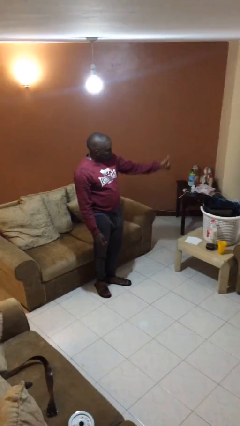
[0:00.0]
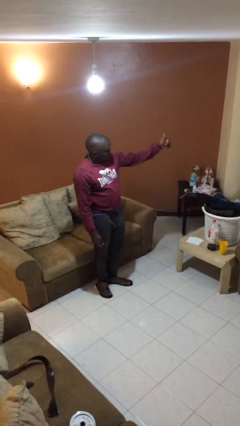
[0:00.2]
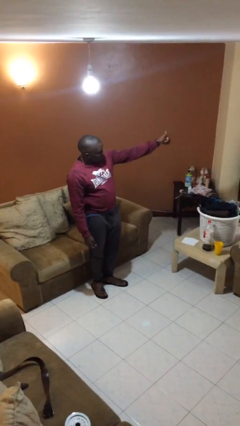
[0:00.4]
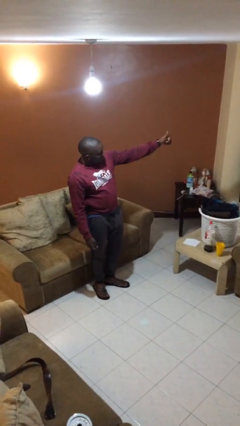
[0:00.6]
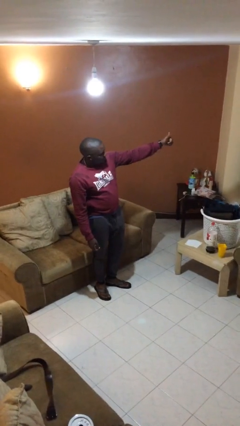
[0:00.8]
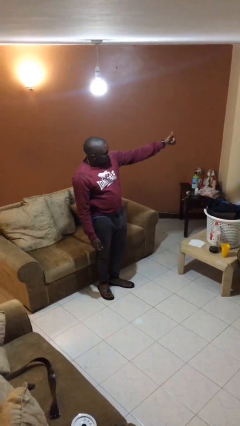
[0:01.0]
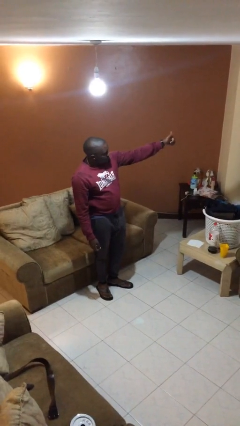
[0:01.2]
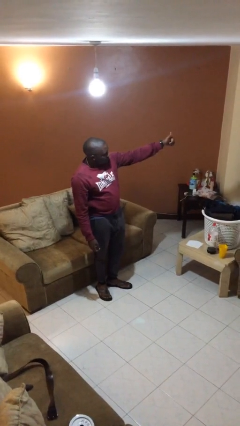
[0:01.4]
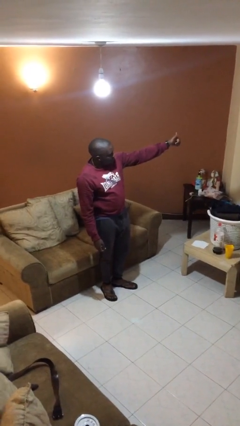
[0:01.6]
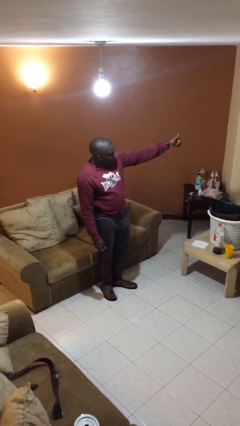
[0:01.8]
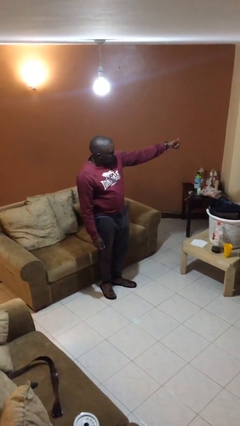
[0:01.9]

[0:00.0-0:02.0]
person gestures thumbs up

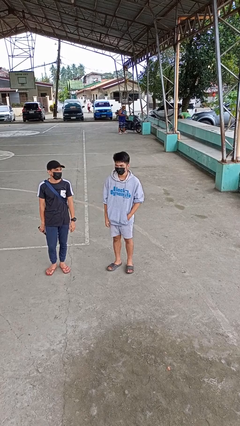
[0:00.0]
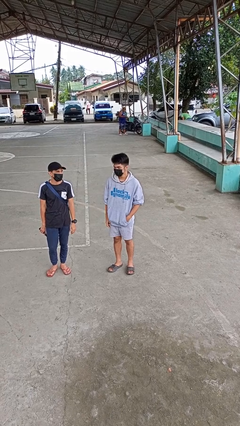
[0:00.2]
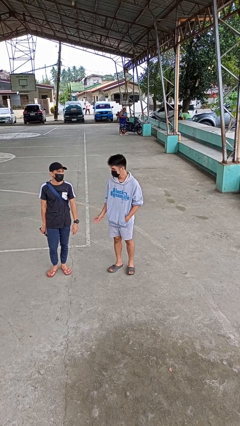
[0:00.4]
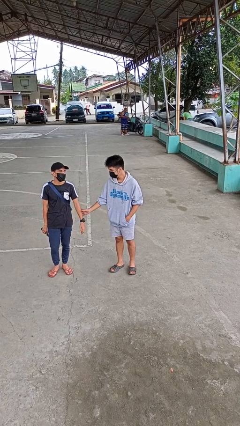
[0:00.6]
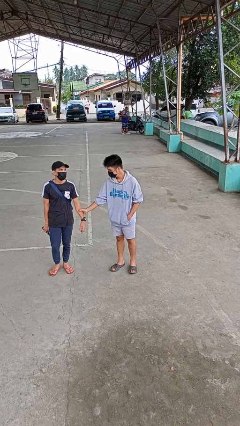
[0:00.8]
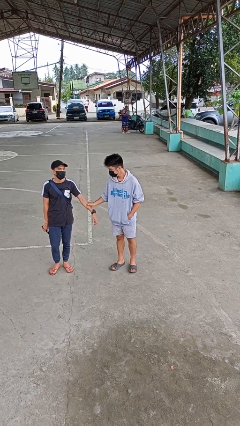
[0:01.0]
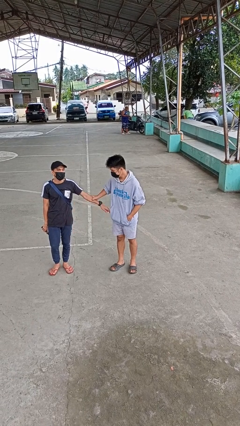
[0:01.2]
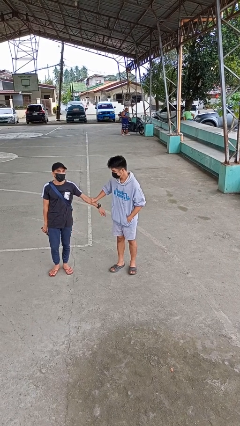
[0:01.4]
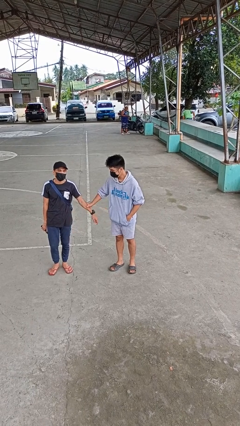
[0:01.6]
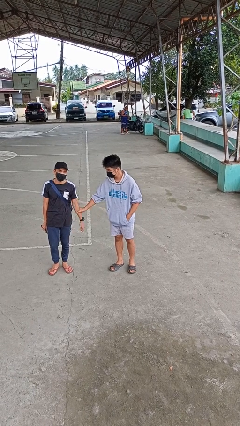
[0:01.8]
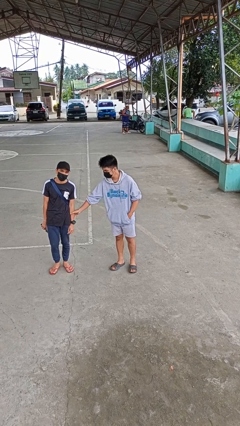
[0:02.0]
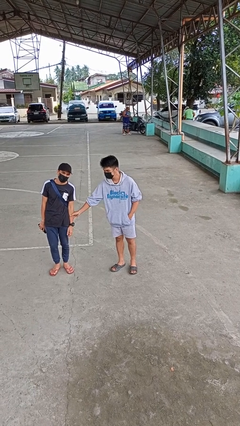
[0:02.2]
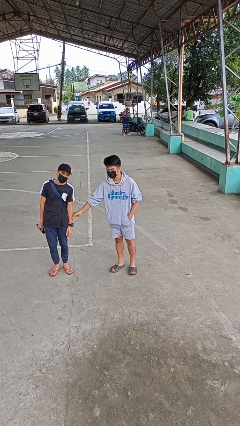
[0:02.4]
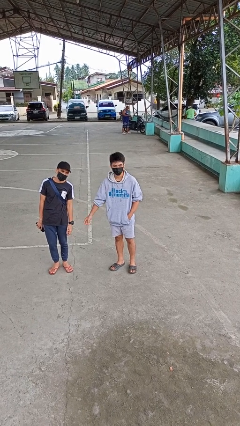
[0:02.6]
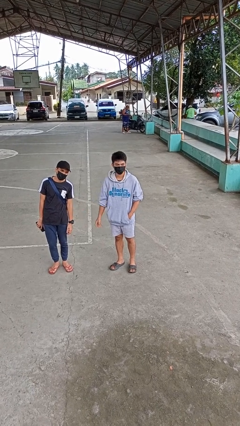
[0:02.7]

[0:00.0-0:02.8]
person grabs person by forearm

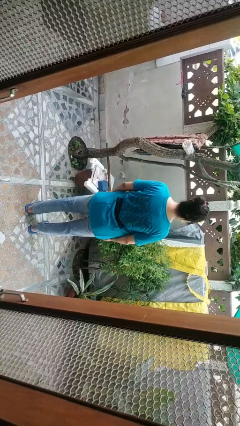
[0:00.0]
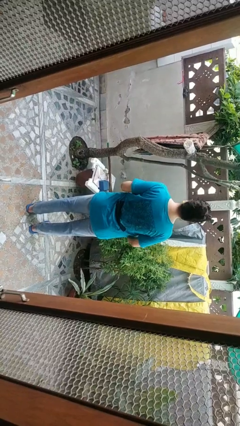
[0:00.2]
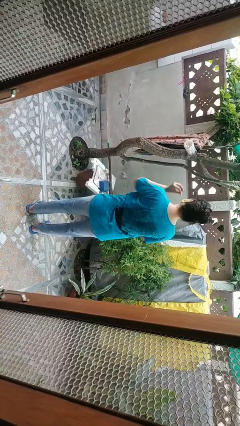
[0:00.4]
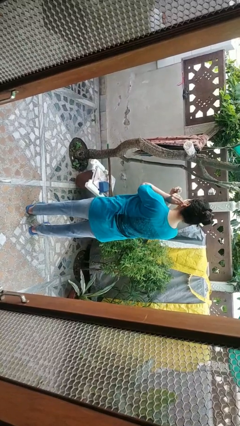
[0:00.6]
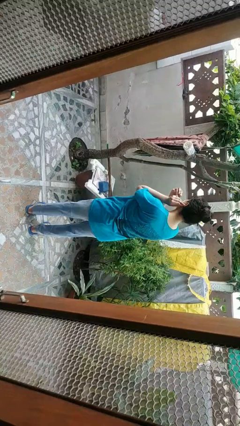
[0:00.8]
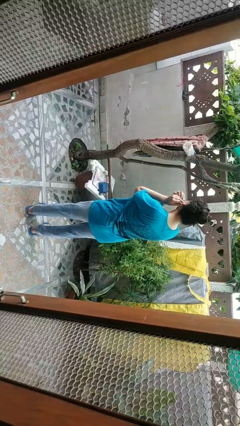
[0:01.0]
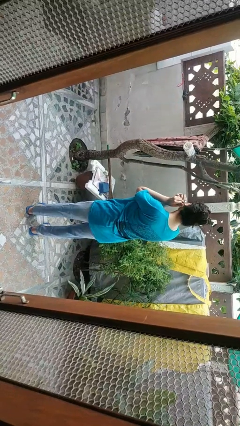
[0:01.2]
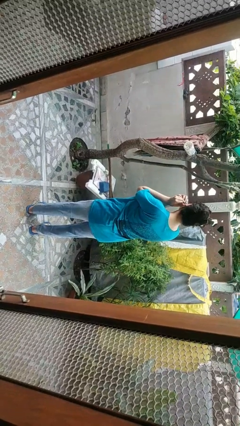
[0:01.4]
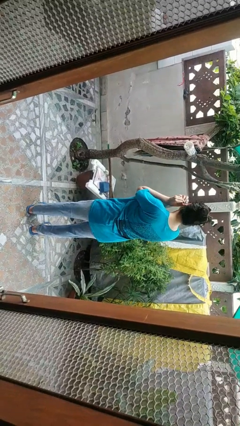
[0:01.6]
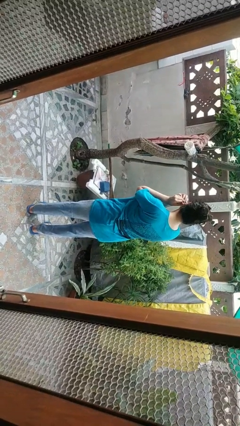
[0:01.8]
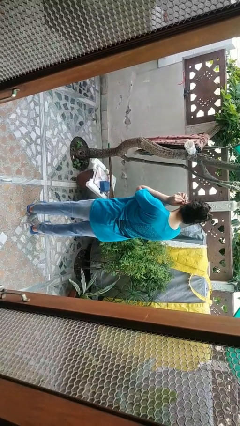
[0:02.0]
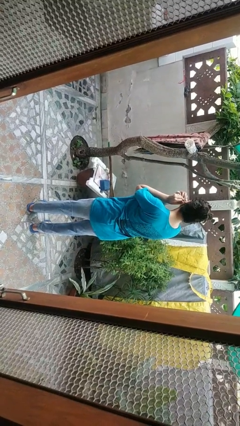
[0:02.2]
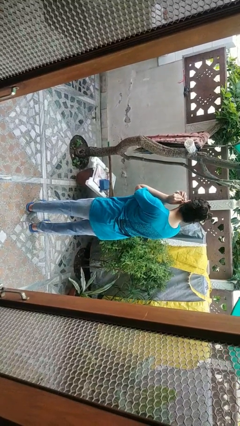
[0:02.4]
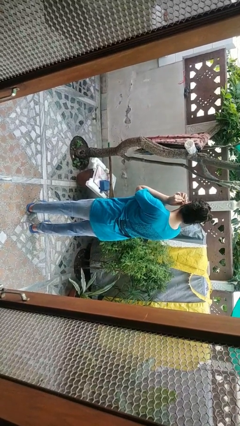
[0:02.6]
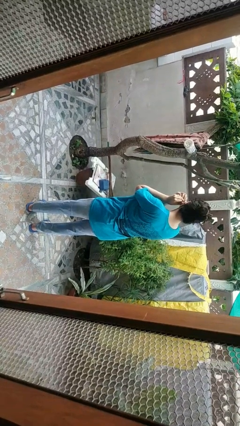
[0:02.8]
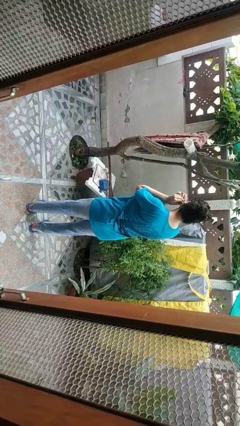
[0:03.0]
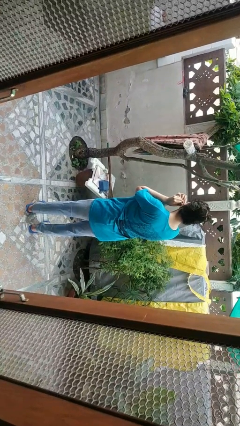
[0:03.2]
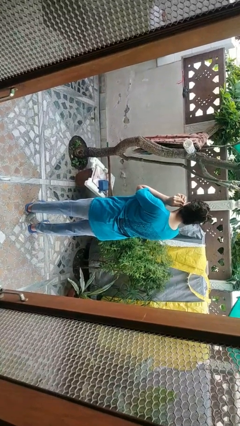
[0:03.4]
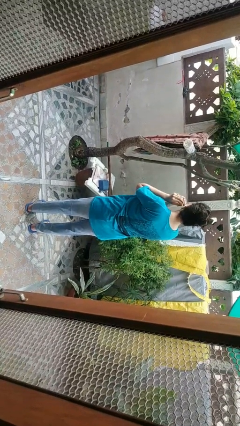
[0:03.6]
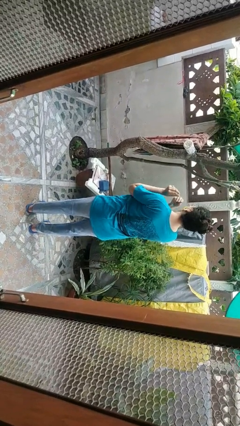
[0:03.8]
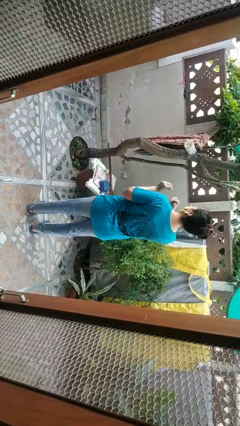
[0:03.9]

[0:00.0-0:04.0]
person puts on earrings

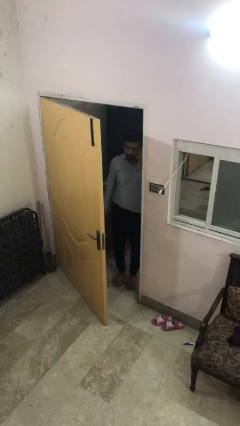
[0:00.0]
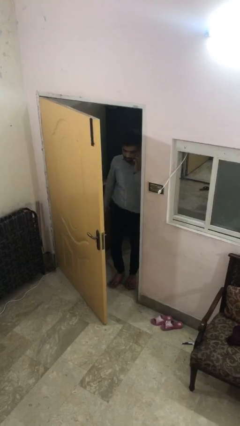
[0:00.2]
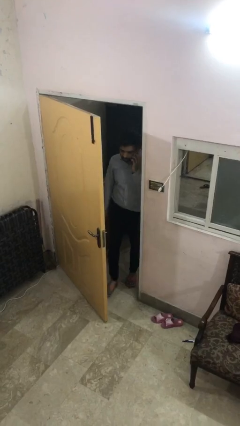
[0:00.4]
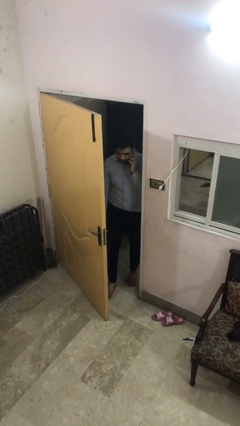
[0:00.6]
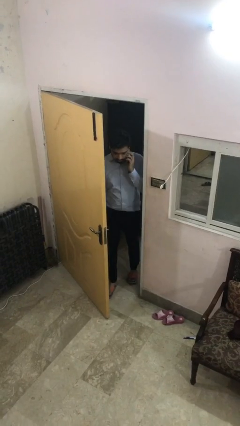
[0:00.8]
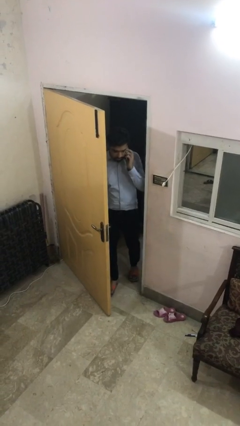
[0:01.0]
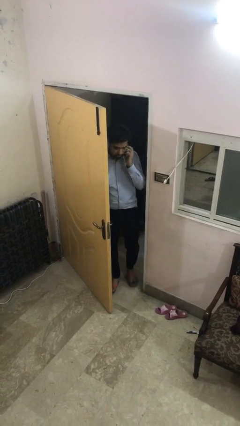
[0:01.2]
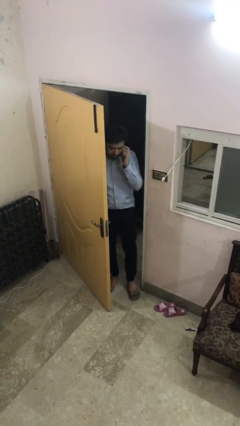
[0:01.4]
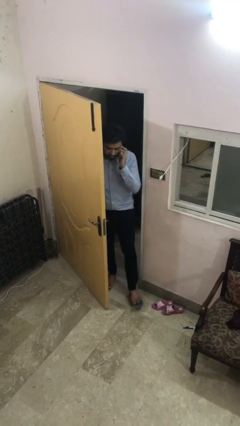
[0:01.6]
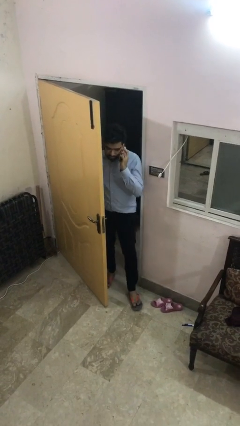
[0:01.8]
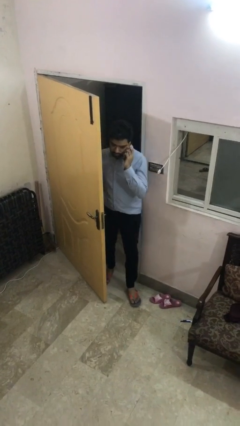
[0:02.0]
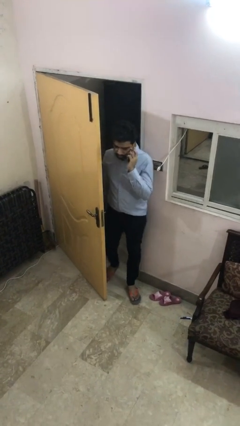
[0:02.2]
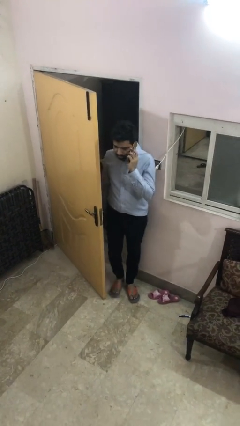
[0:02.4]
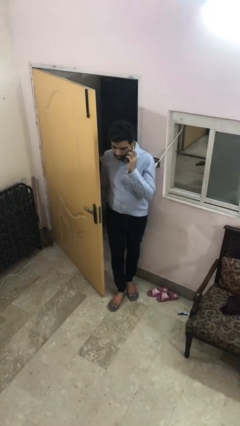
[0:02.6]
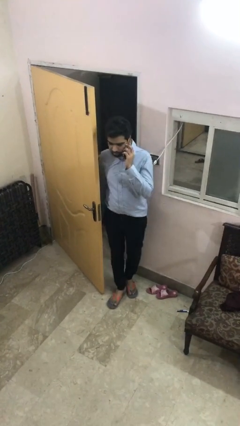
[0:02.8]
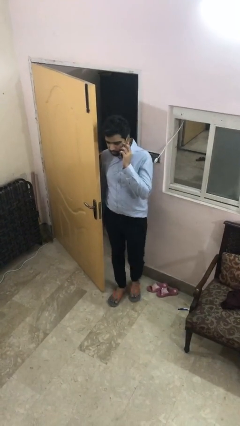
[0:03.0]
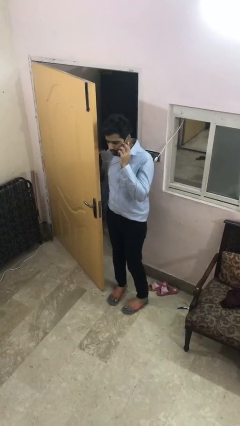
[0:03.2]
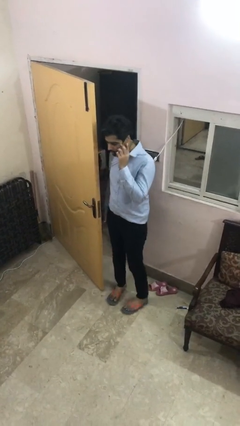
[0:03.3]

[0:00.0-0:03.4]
person enters scene through structure

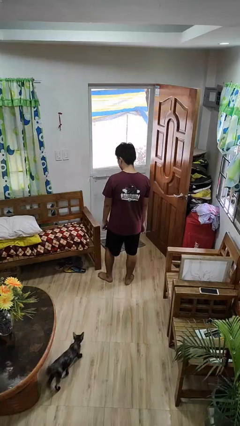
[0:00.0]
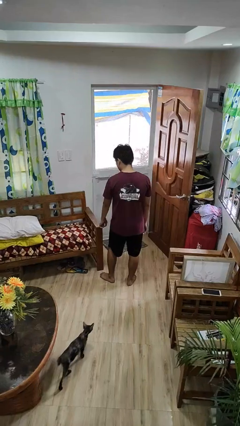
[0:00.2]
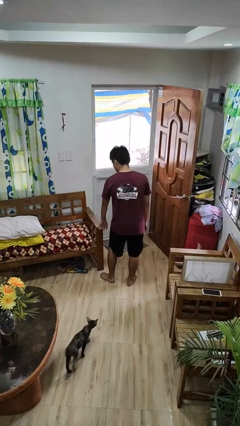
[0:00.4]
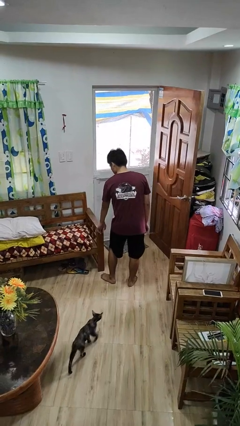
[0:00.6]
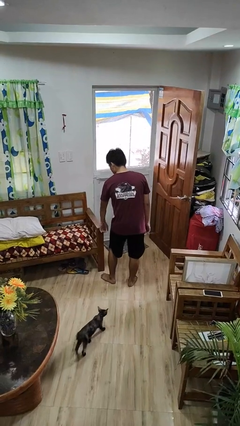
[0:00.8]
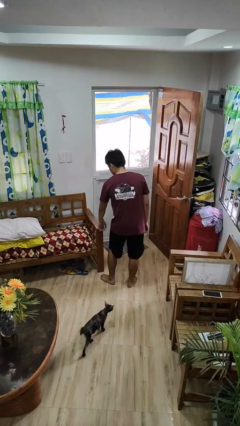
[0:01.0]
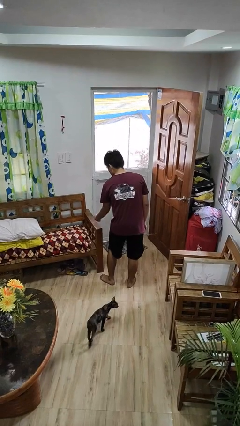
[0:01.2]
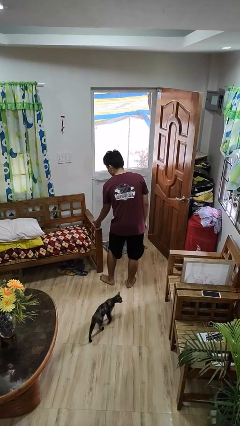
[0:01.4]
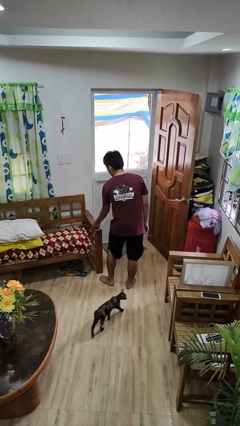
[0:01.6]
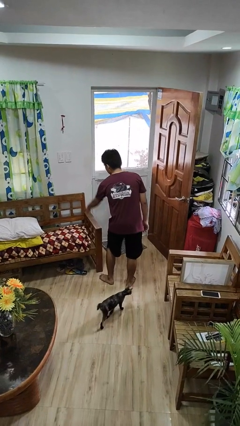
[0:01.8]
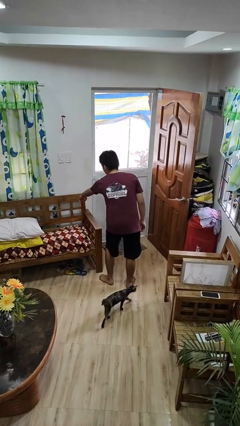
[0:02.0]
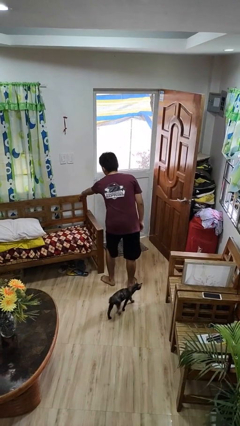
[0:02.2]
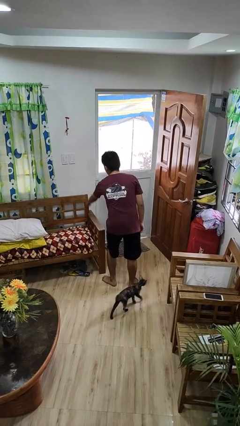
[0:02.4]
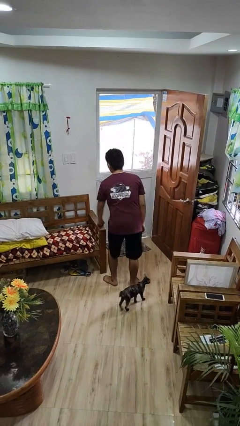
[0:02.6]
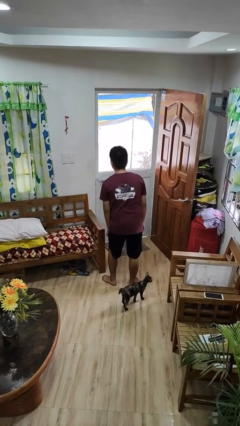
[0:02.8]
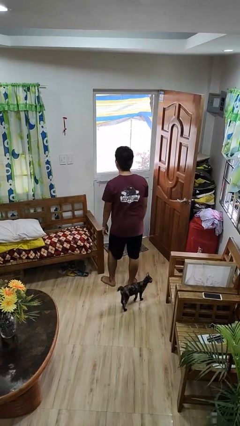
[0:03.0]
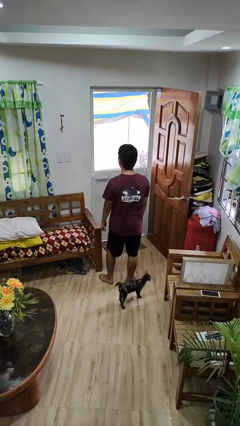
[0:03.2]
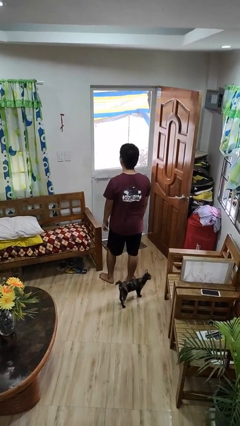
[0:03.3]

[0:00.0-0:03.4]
person taps object with finger

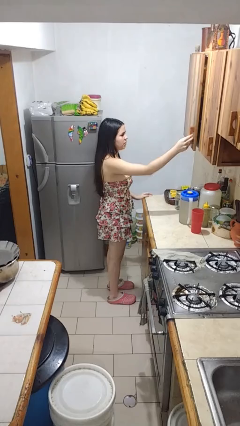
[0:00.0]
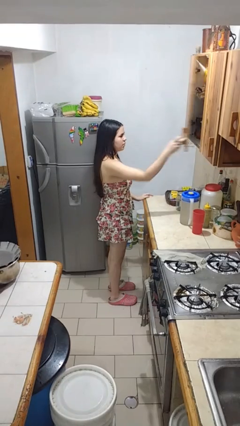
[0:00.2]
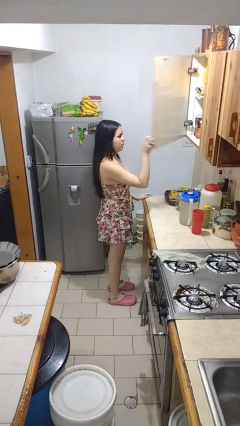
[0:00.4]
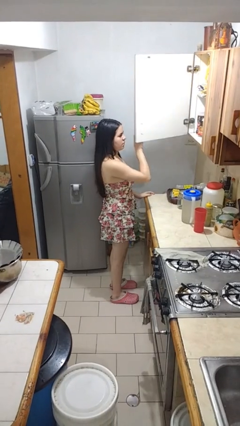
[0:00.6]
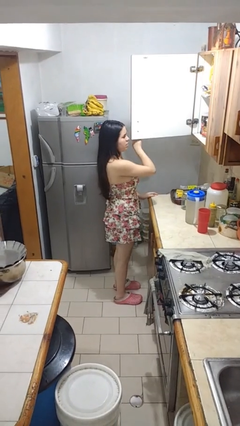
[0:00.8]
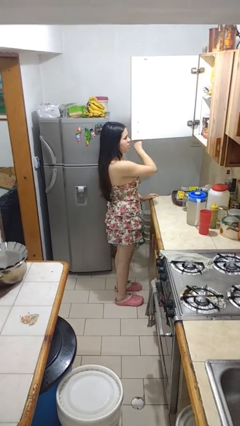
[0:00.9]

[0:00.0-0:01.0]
person opens cabinet

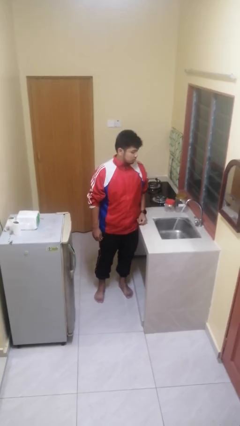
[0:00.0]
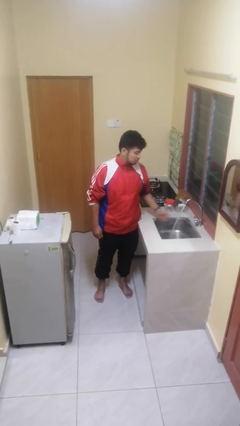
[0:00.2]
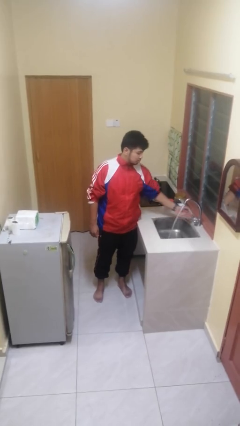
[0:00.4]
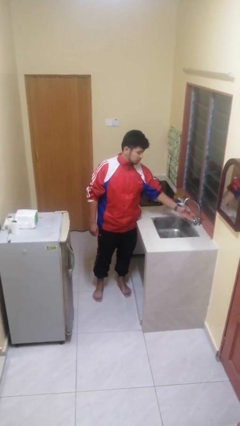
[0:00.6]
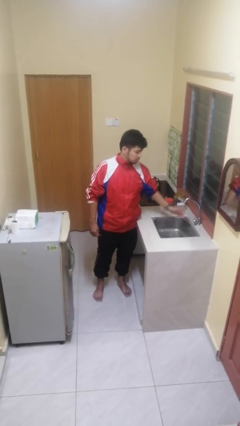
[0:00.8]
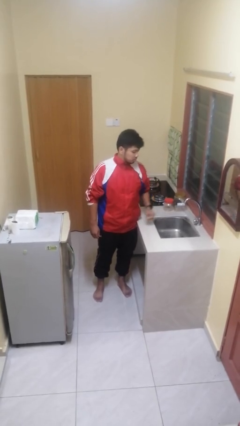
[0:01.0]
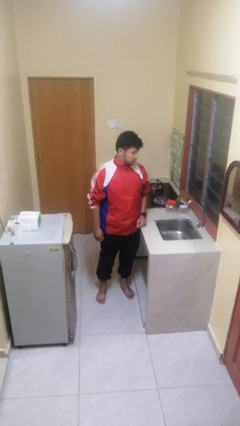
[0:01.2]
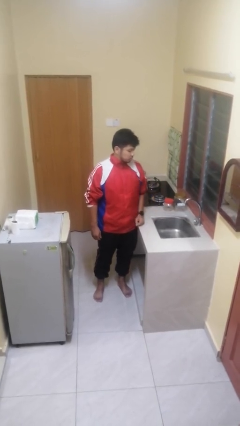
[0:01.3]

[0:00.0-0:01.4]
person turns off faucet
